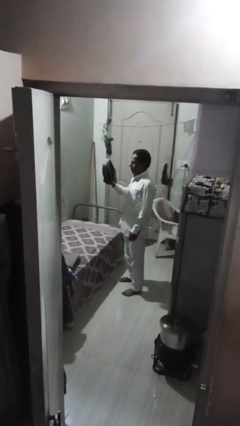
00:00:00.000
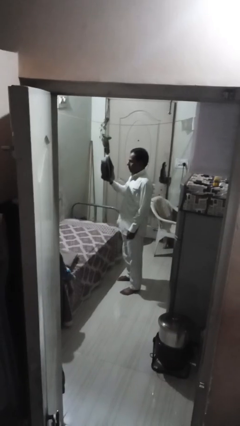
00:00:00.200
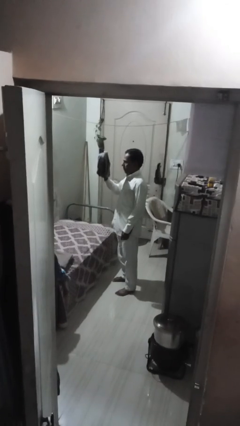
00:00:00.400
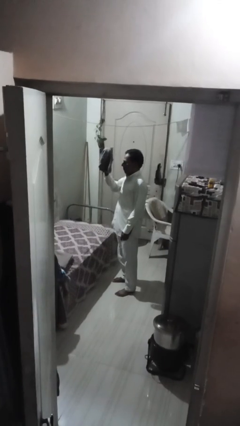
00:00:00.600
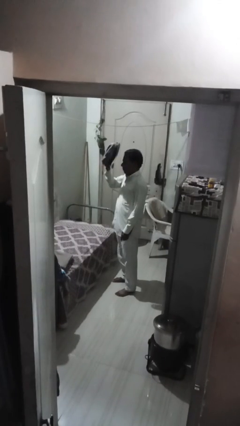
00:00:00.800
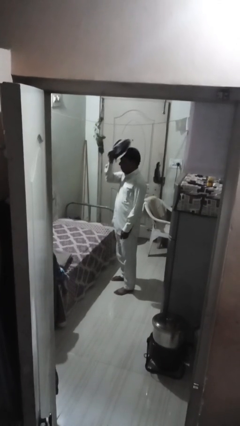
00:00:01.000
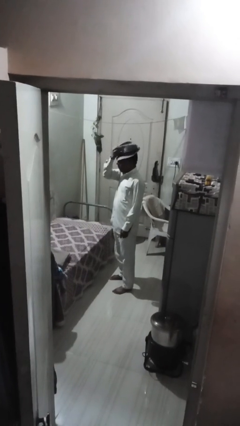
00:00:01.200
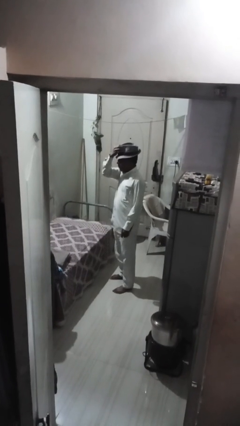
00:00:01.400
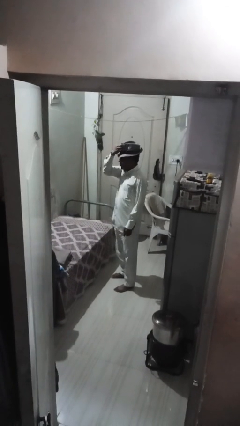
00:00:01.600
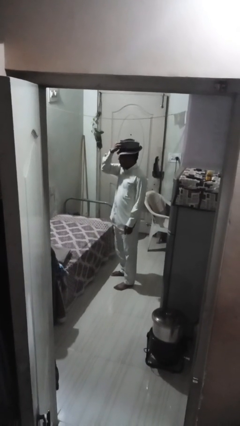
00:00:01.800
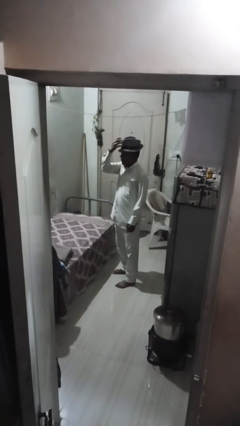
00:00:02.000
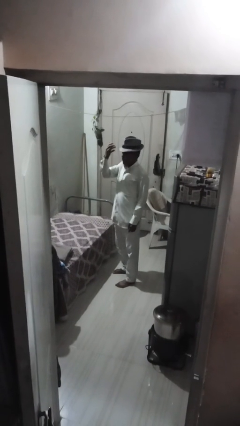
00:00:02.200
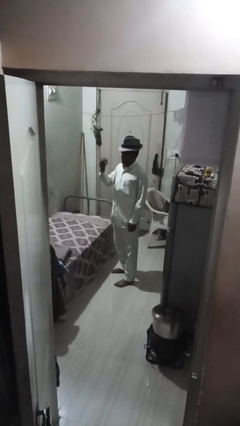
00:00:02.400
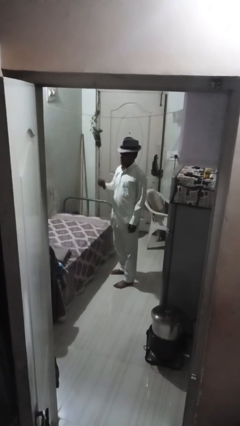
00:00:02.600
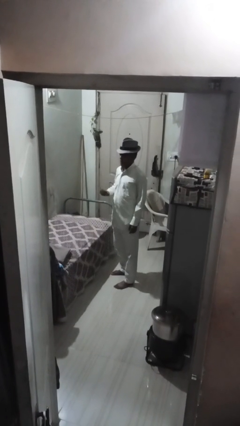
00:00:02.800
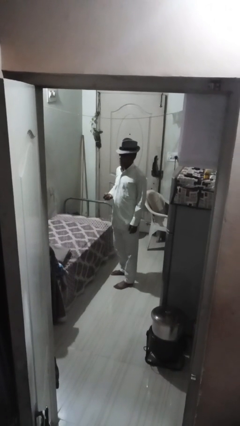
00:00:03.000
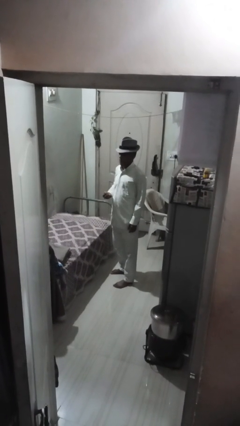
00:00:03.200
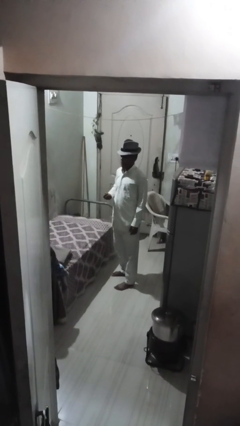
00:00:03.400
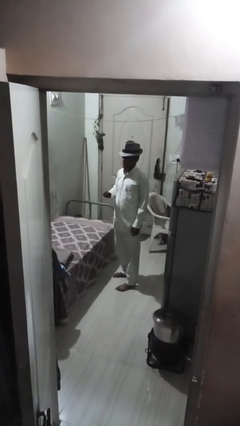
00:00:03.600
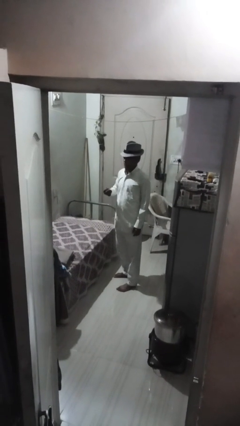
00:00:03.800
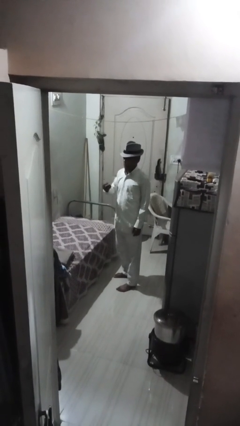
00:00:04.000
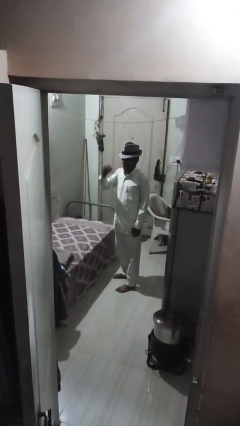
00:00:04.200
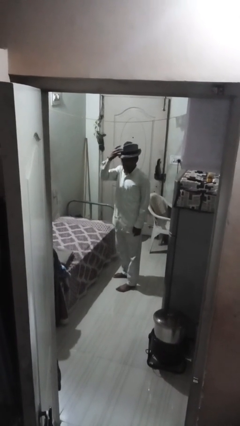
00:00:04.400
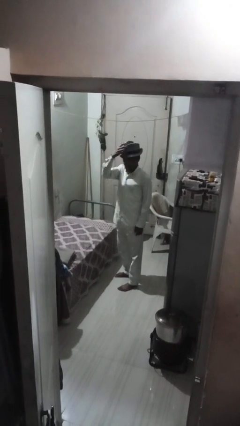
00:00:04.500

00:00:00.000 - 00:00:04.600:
person puts on hat

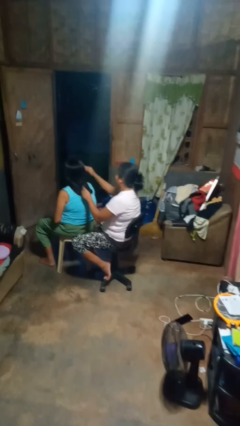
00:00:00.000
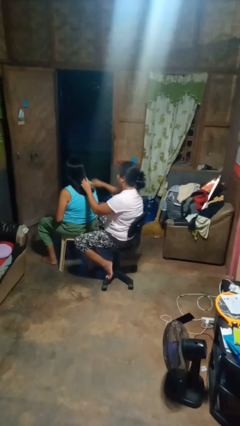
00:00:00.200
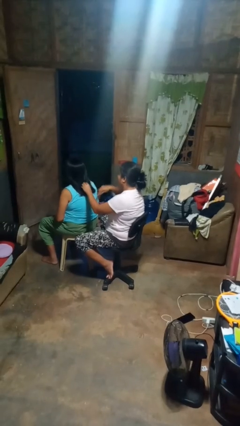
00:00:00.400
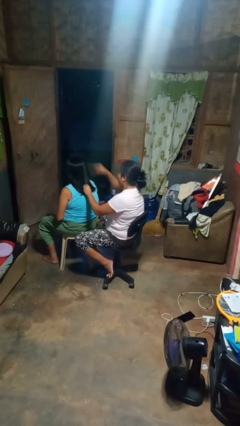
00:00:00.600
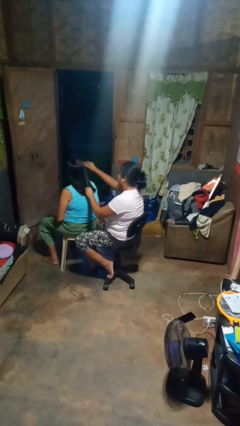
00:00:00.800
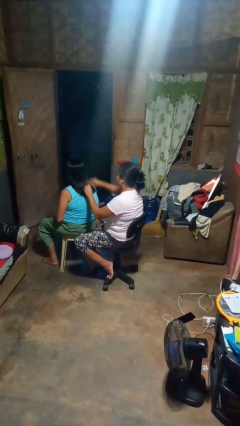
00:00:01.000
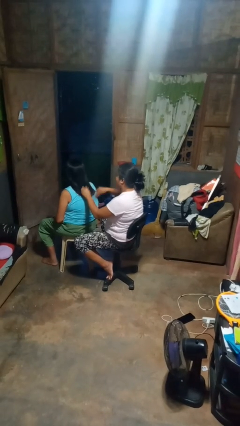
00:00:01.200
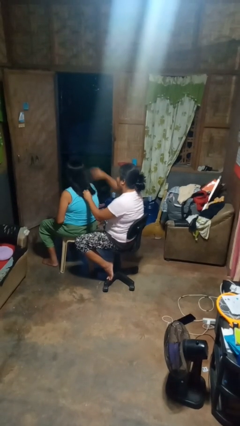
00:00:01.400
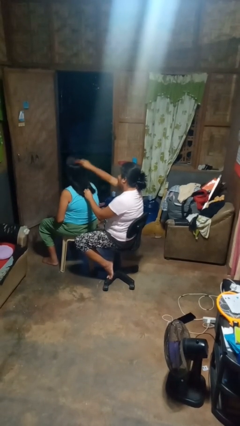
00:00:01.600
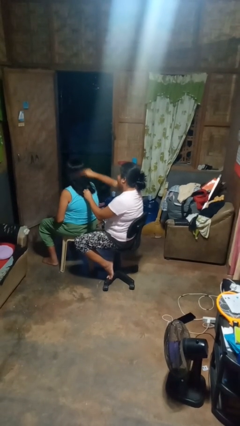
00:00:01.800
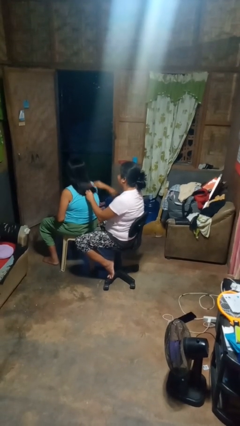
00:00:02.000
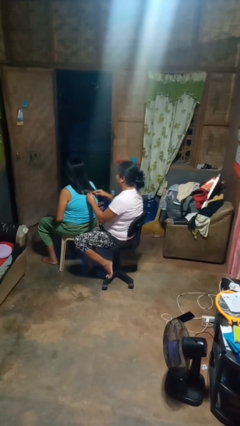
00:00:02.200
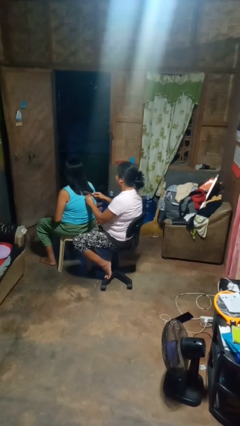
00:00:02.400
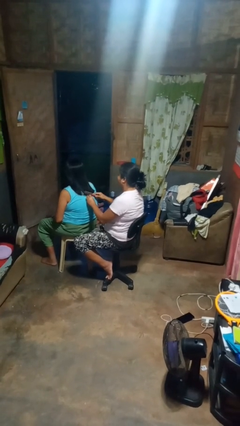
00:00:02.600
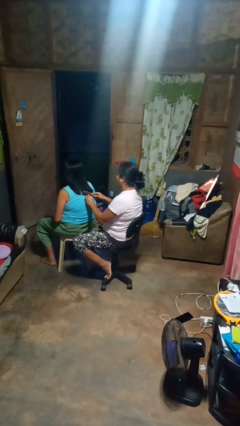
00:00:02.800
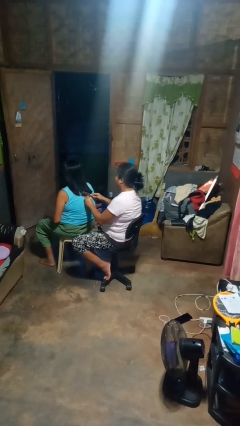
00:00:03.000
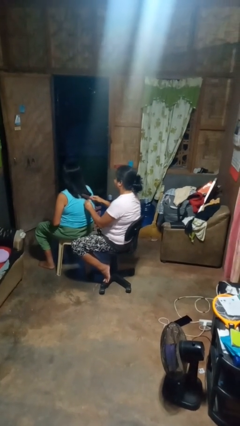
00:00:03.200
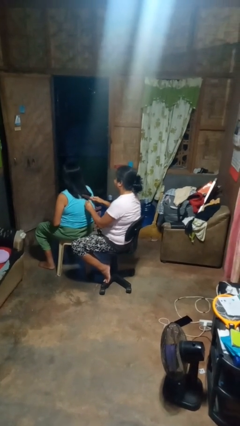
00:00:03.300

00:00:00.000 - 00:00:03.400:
person brushes hair of person

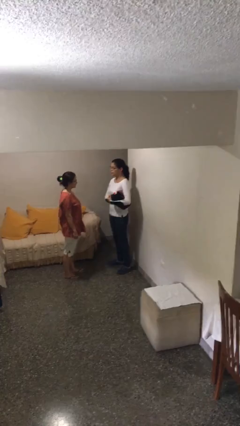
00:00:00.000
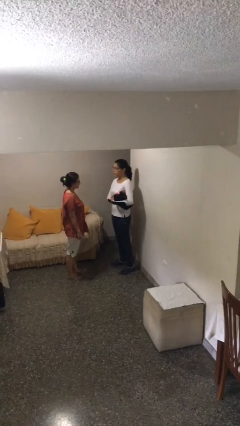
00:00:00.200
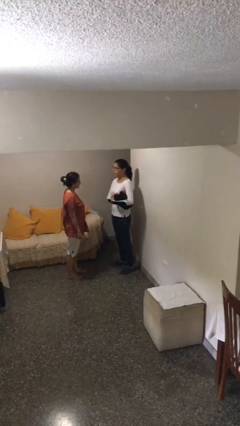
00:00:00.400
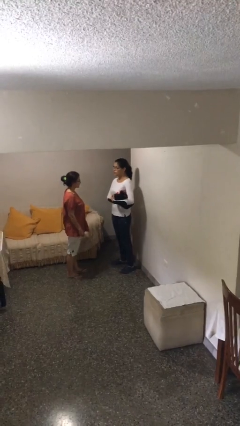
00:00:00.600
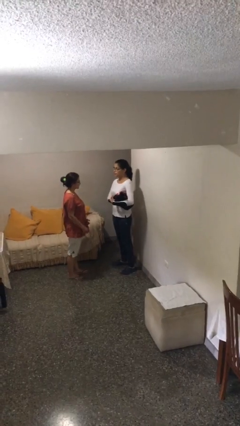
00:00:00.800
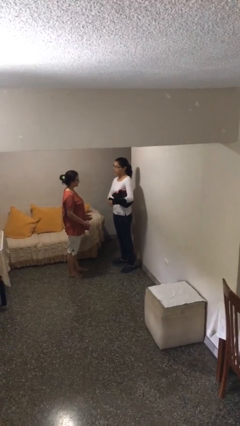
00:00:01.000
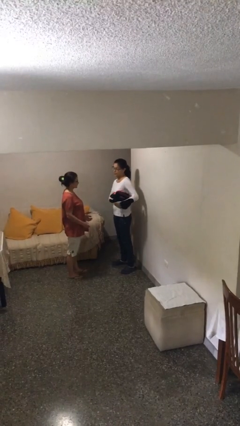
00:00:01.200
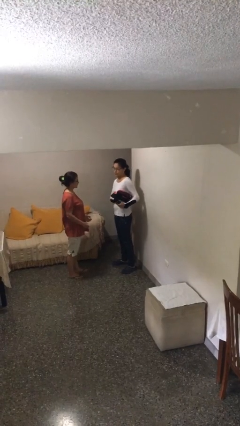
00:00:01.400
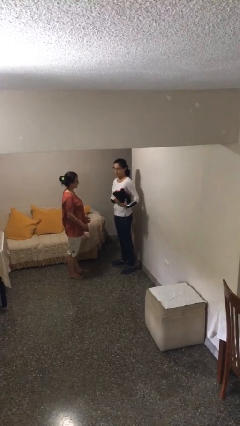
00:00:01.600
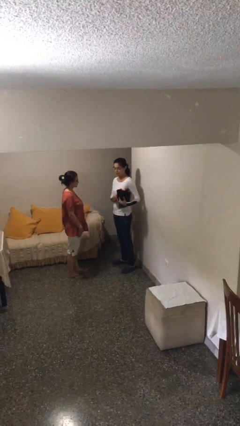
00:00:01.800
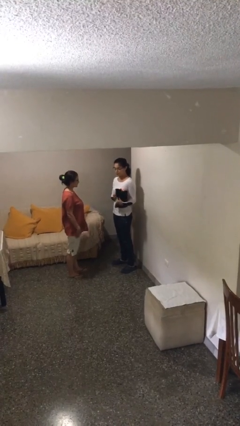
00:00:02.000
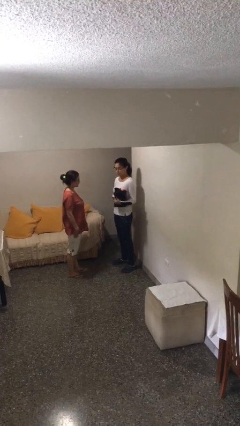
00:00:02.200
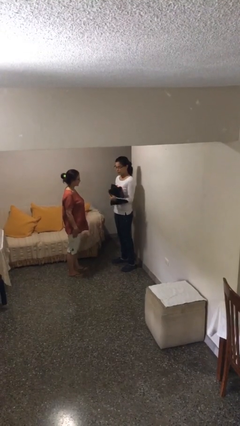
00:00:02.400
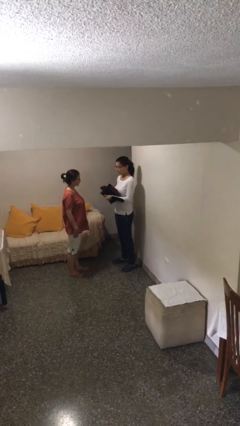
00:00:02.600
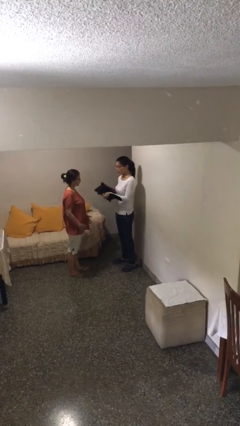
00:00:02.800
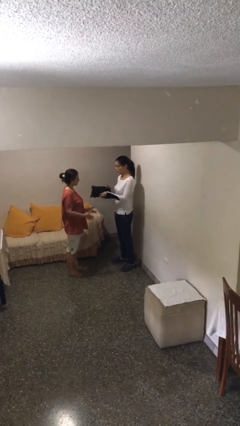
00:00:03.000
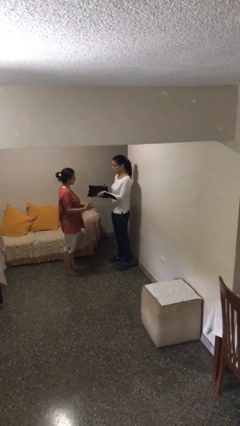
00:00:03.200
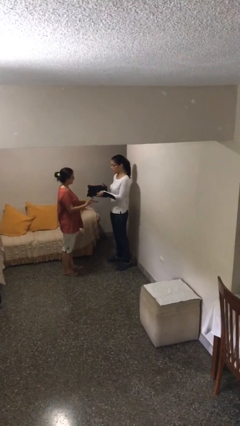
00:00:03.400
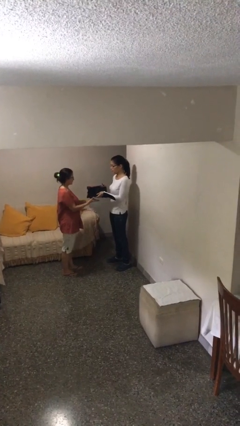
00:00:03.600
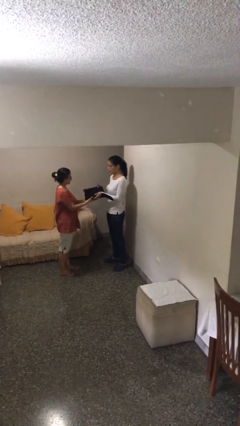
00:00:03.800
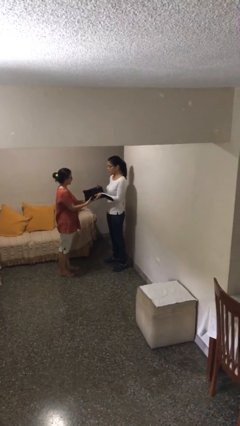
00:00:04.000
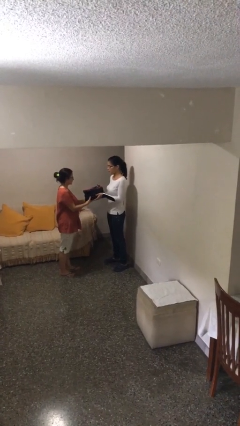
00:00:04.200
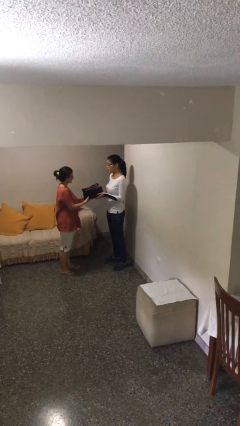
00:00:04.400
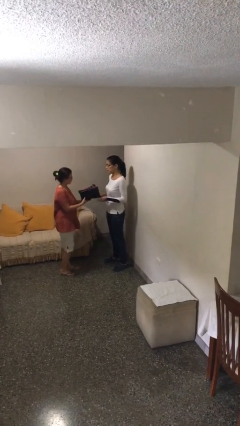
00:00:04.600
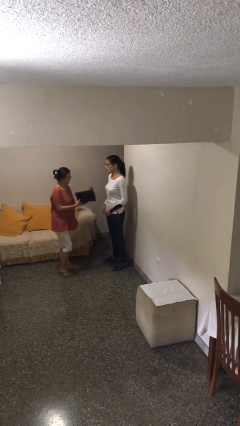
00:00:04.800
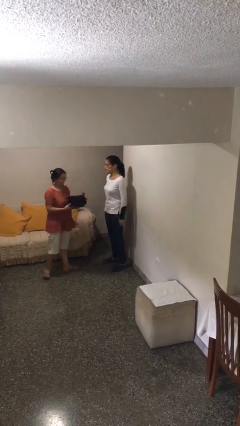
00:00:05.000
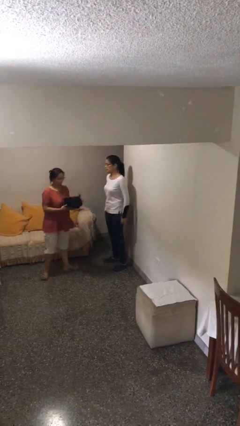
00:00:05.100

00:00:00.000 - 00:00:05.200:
person transfers object to person

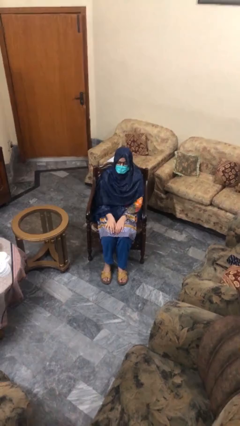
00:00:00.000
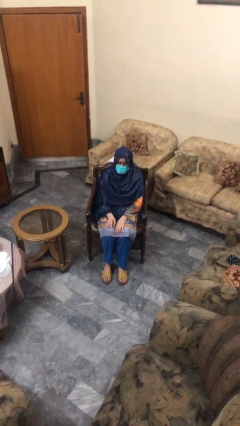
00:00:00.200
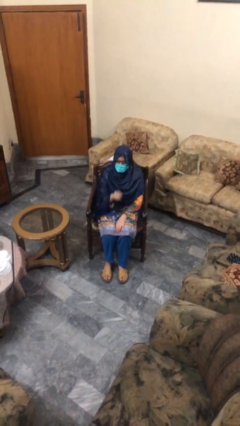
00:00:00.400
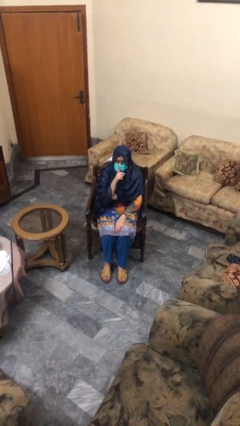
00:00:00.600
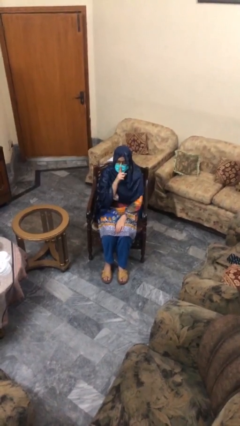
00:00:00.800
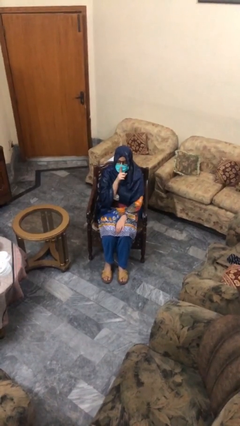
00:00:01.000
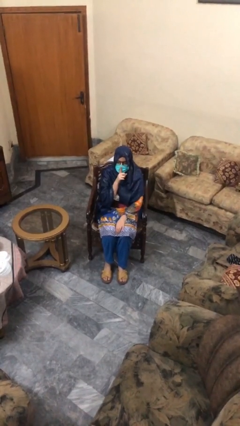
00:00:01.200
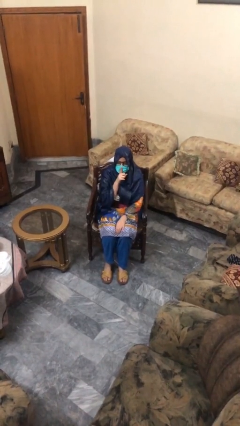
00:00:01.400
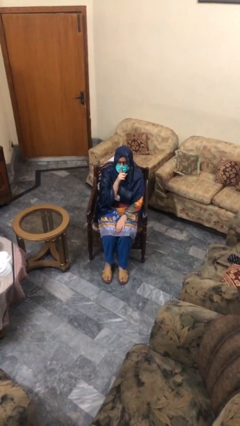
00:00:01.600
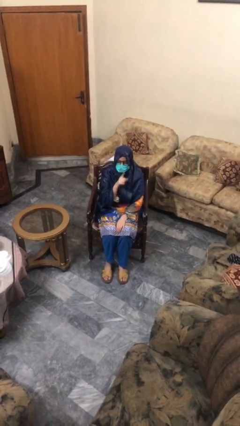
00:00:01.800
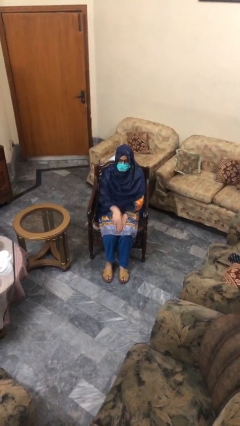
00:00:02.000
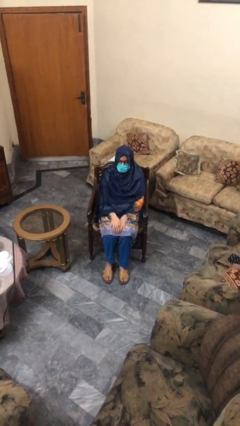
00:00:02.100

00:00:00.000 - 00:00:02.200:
person gestures be quiet

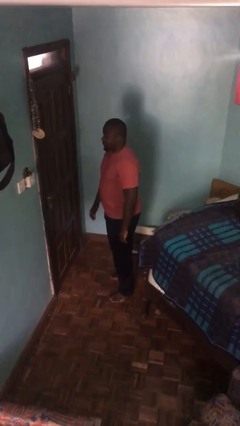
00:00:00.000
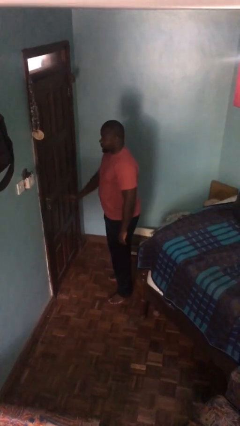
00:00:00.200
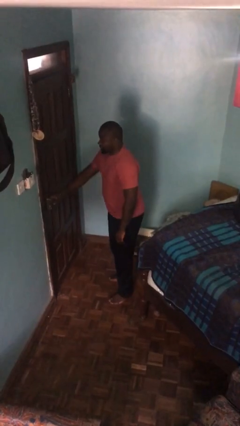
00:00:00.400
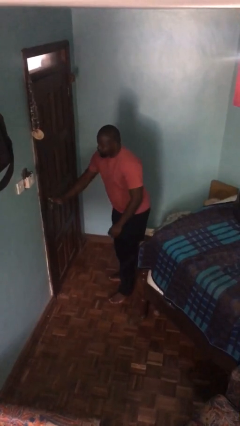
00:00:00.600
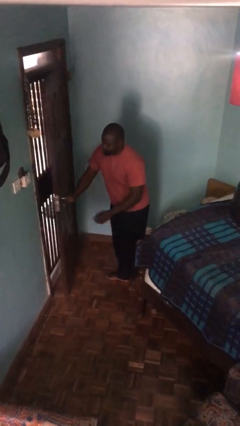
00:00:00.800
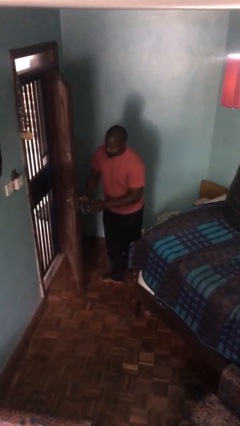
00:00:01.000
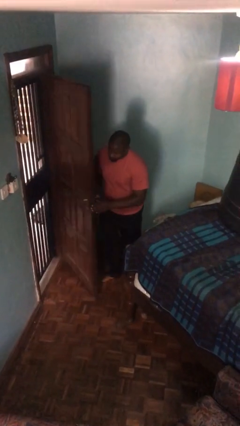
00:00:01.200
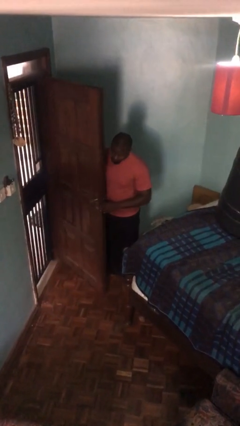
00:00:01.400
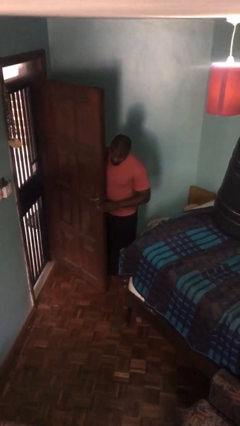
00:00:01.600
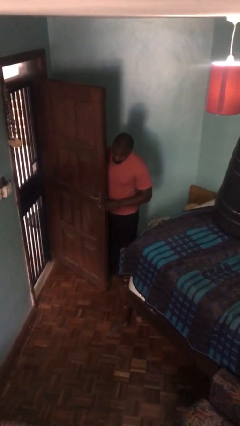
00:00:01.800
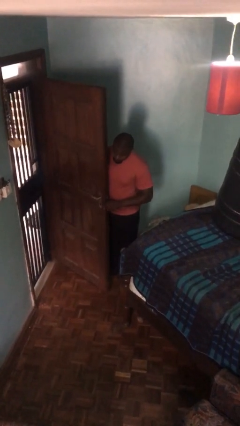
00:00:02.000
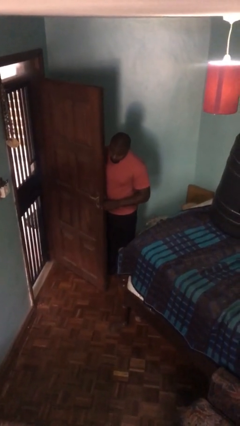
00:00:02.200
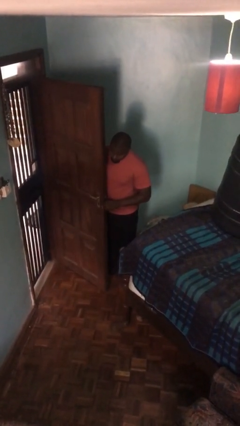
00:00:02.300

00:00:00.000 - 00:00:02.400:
person opens facility door
